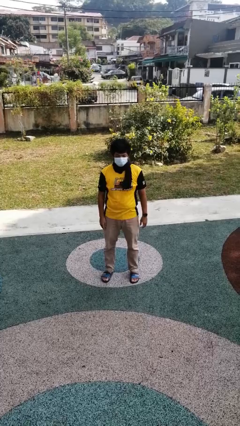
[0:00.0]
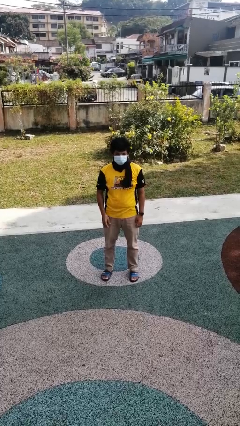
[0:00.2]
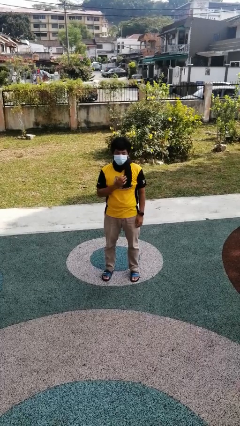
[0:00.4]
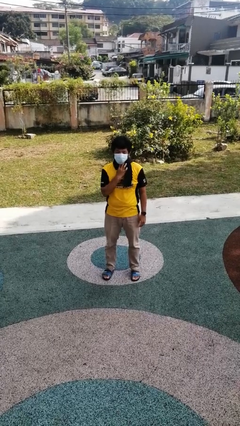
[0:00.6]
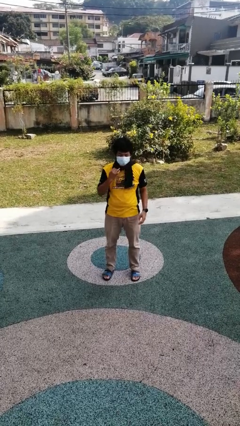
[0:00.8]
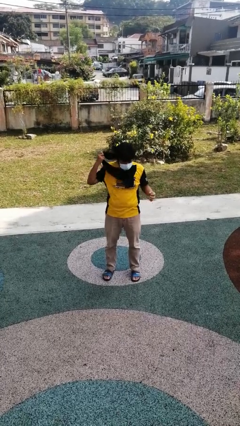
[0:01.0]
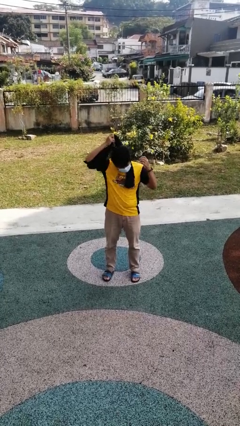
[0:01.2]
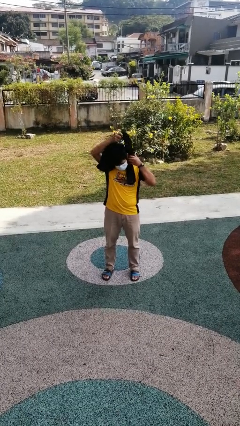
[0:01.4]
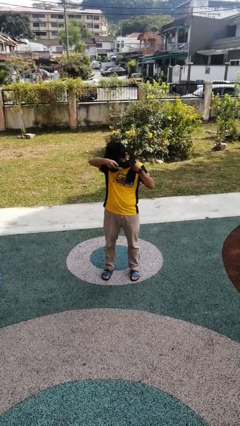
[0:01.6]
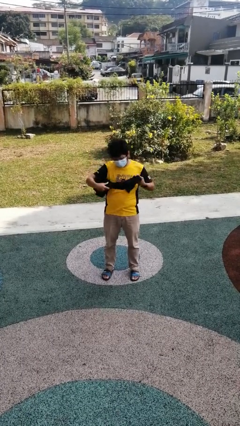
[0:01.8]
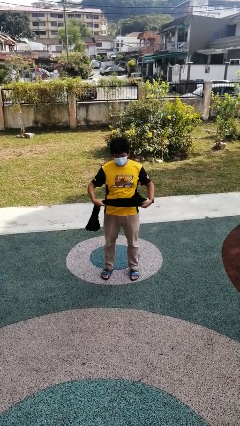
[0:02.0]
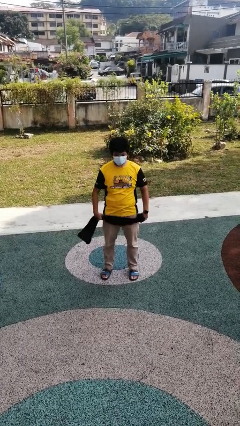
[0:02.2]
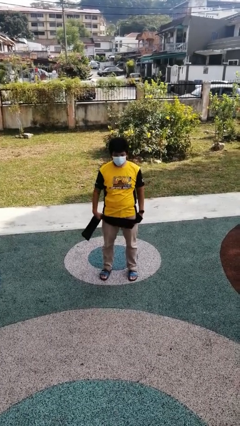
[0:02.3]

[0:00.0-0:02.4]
person takes off scarf

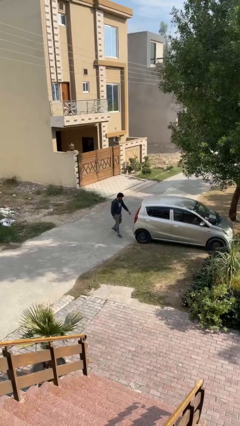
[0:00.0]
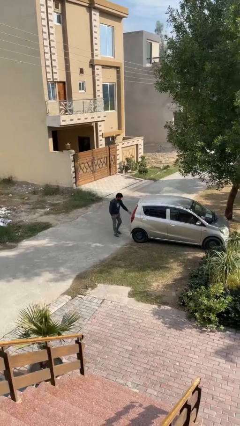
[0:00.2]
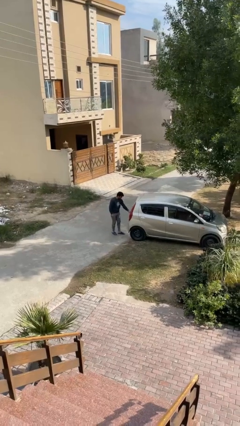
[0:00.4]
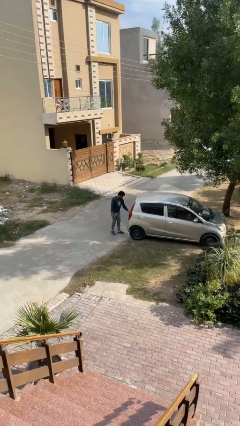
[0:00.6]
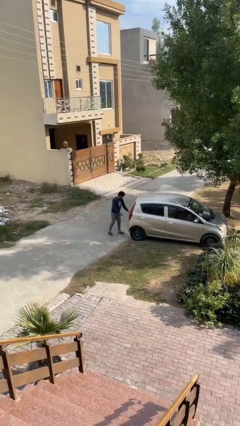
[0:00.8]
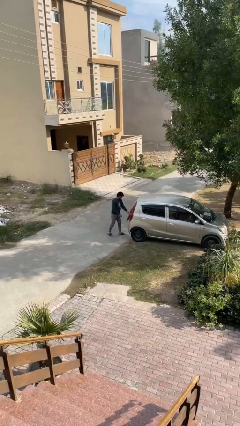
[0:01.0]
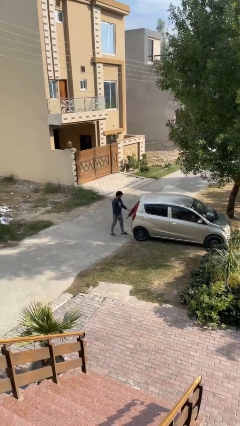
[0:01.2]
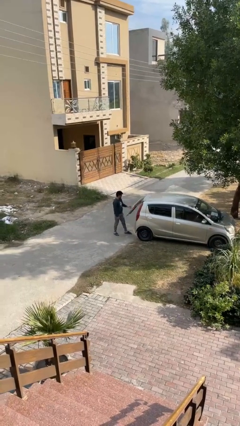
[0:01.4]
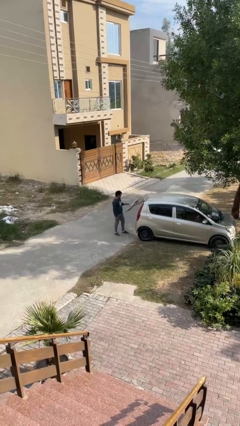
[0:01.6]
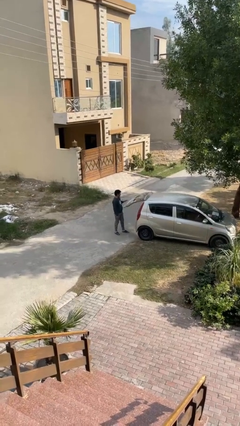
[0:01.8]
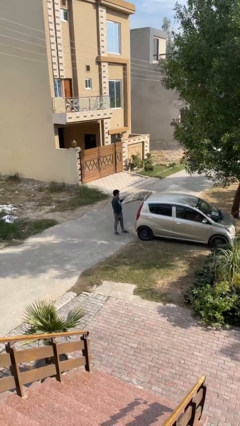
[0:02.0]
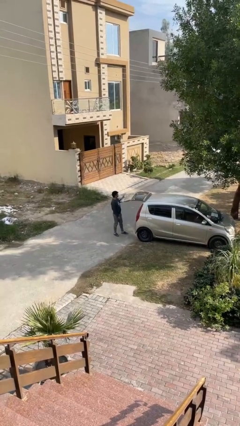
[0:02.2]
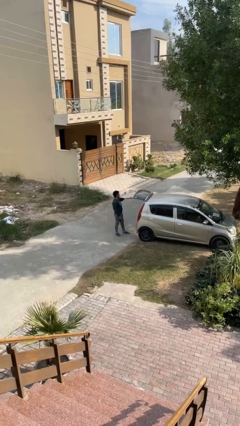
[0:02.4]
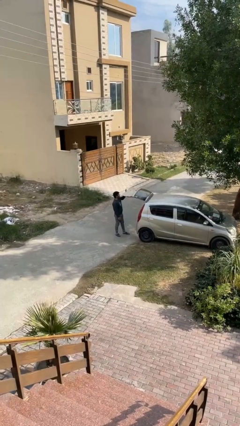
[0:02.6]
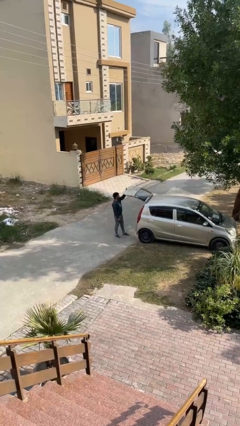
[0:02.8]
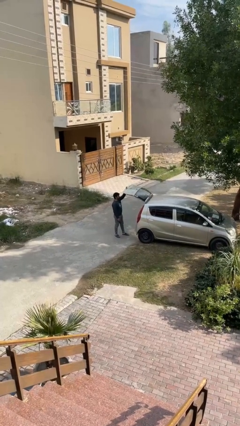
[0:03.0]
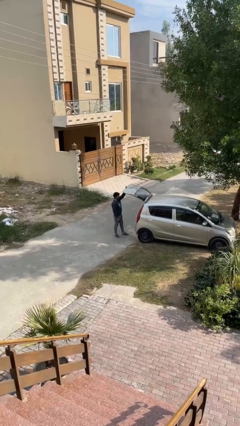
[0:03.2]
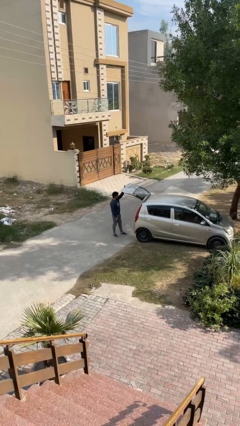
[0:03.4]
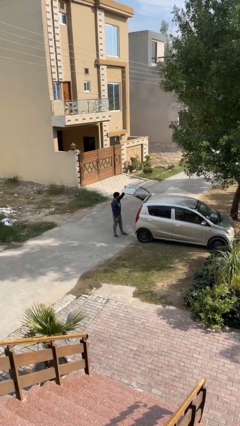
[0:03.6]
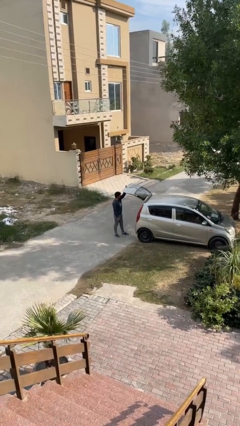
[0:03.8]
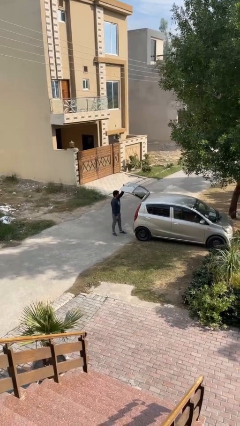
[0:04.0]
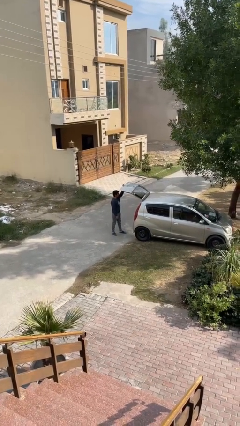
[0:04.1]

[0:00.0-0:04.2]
person opens car trunk

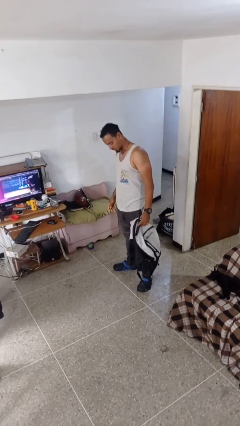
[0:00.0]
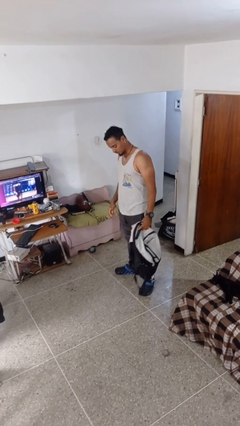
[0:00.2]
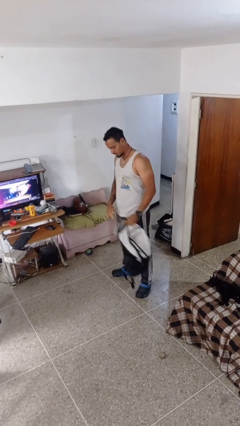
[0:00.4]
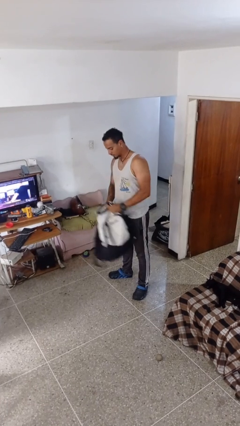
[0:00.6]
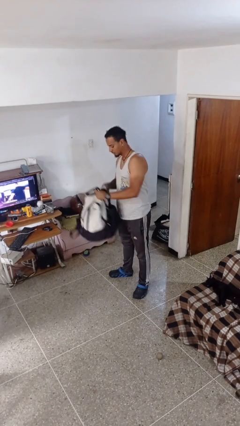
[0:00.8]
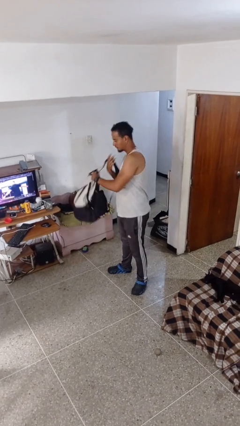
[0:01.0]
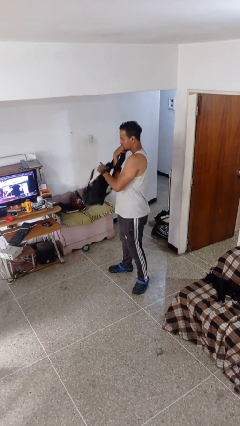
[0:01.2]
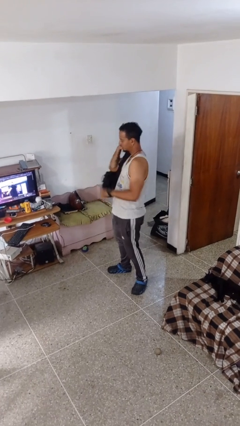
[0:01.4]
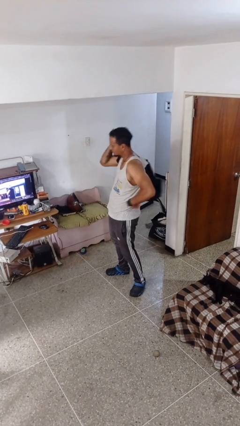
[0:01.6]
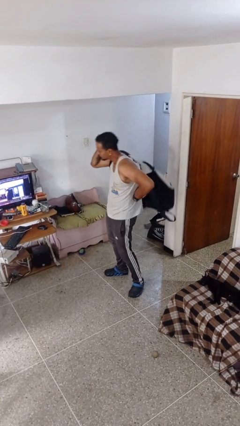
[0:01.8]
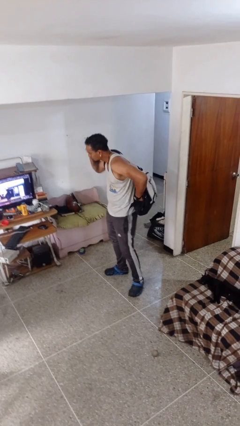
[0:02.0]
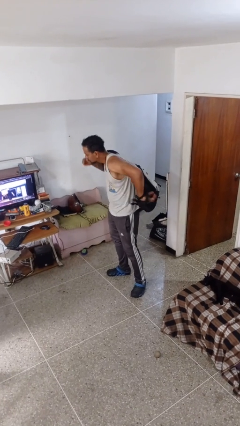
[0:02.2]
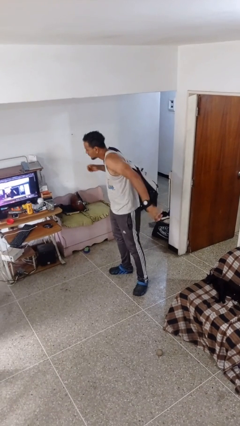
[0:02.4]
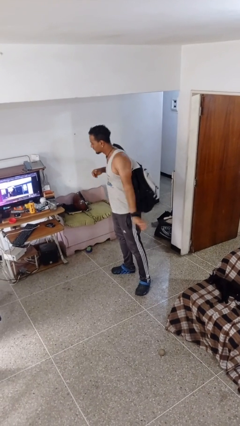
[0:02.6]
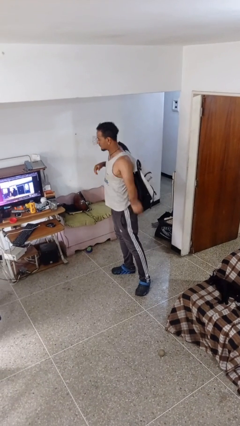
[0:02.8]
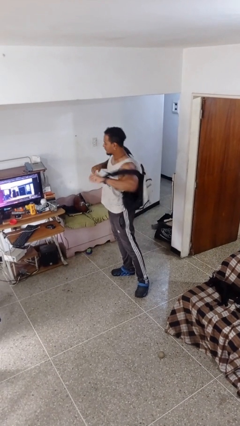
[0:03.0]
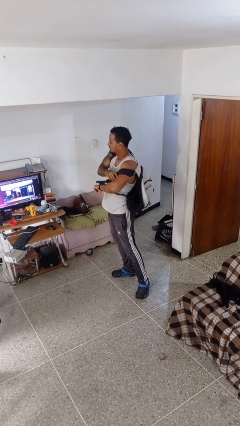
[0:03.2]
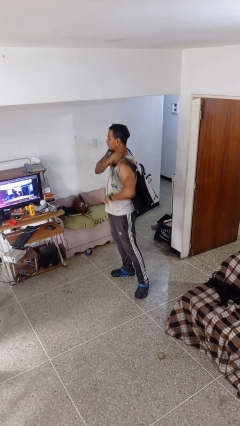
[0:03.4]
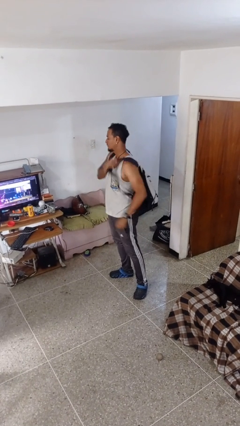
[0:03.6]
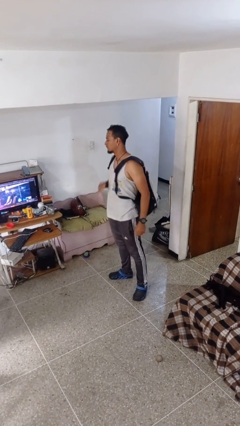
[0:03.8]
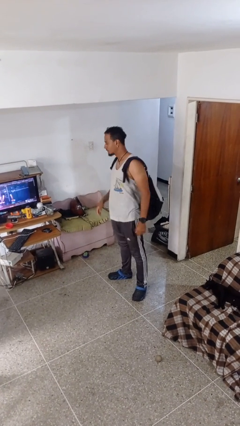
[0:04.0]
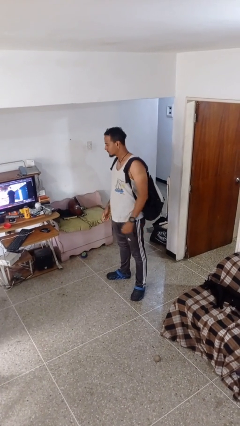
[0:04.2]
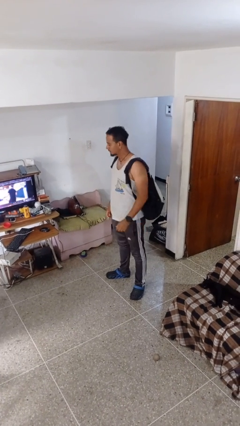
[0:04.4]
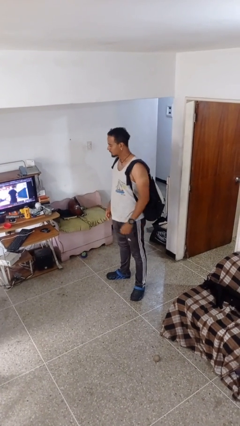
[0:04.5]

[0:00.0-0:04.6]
person puts on backpack

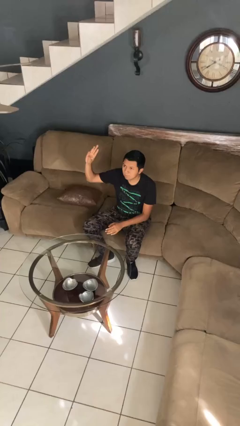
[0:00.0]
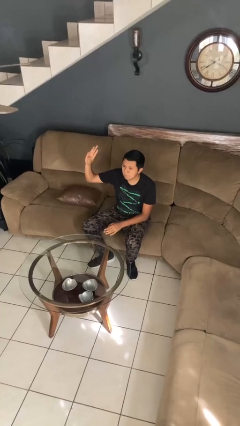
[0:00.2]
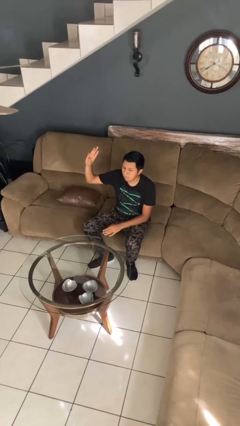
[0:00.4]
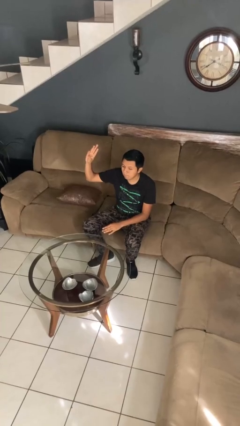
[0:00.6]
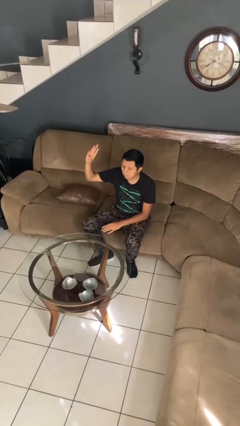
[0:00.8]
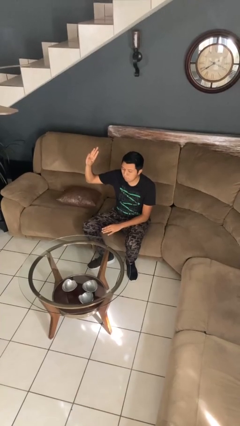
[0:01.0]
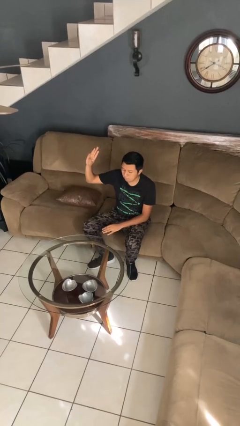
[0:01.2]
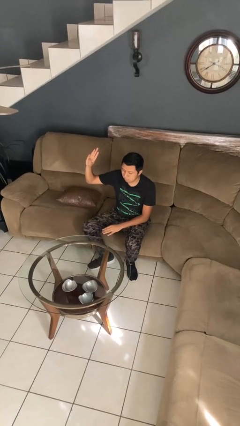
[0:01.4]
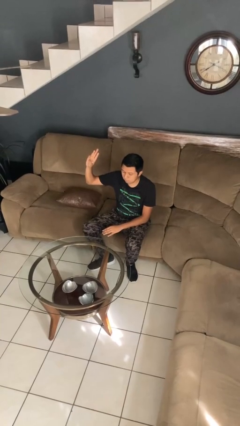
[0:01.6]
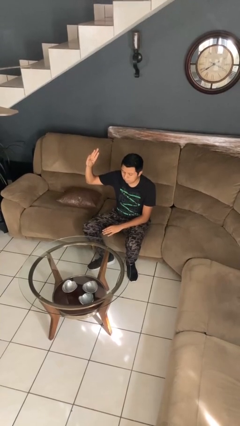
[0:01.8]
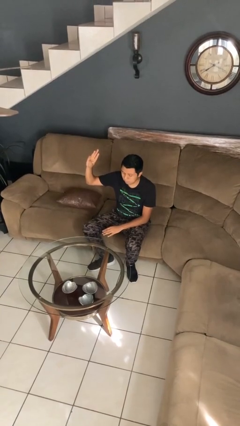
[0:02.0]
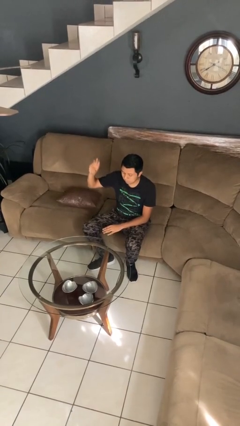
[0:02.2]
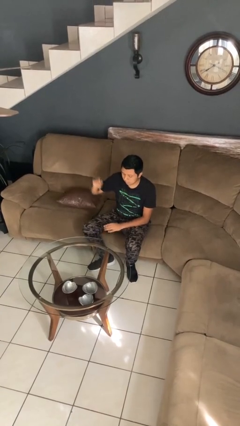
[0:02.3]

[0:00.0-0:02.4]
person gestures number three

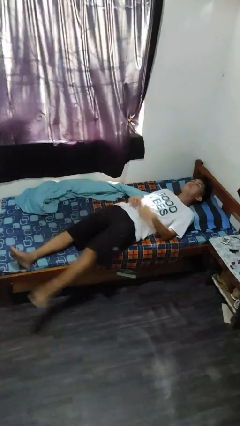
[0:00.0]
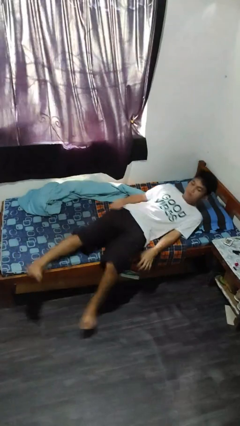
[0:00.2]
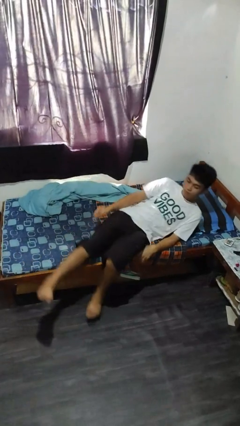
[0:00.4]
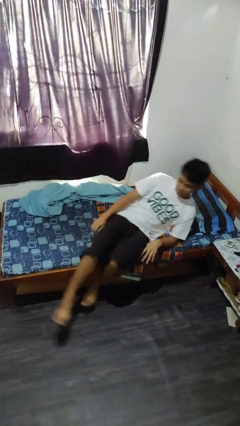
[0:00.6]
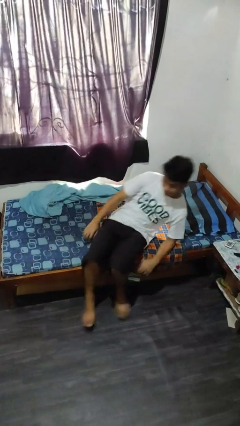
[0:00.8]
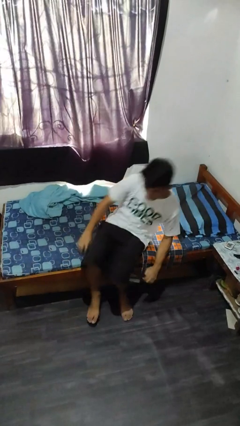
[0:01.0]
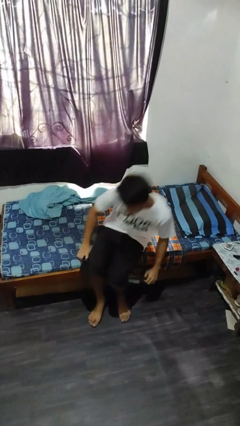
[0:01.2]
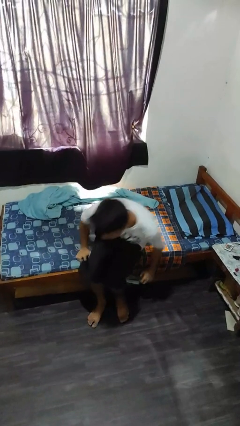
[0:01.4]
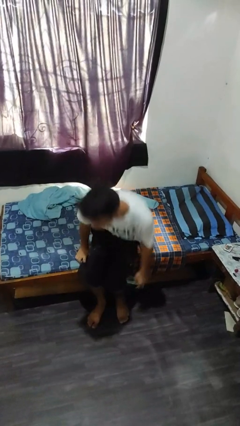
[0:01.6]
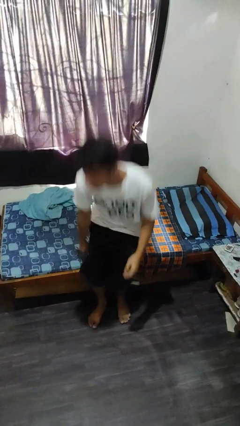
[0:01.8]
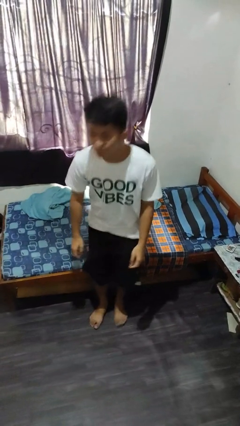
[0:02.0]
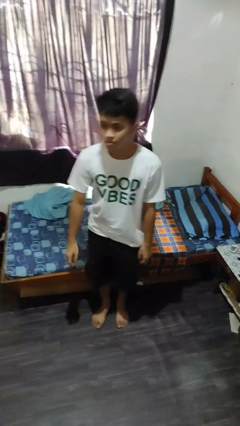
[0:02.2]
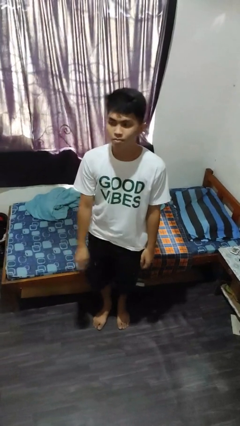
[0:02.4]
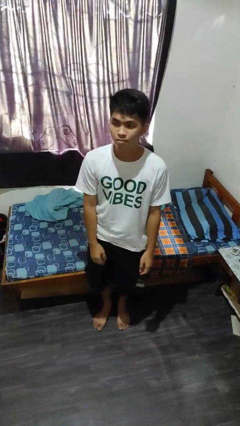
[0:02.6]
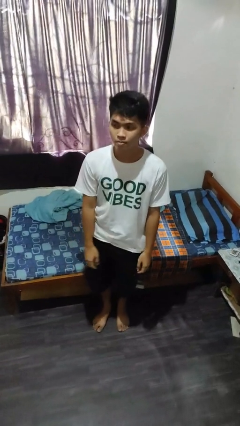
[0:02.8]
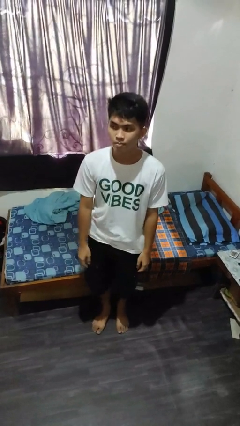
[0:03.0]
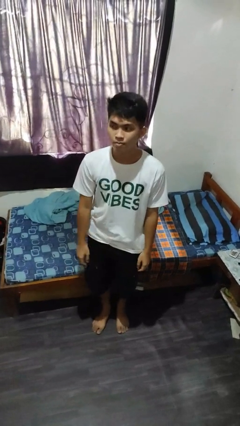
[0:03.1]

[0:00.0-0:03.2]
person stands up
